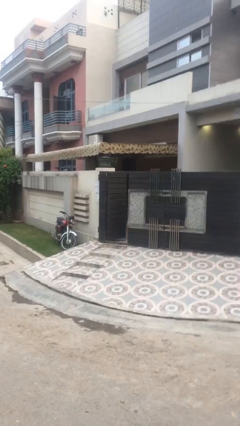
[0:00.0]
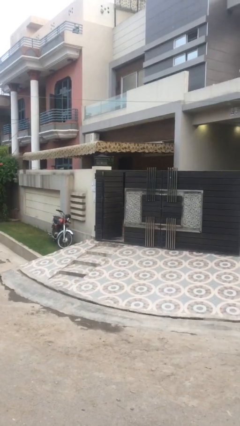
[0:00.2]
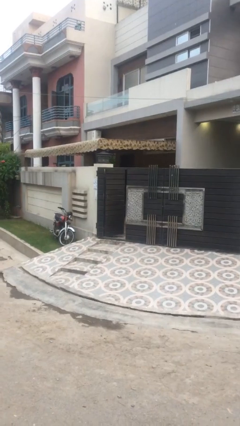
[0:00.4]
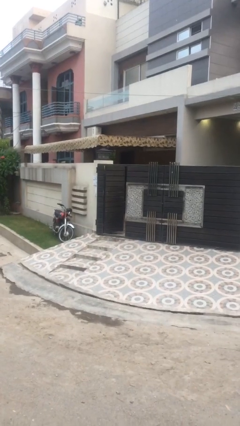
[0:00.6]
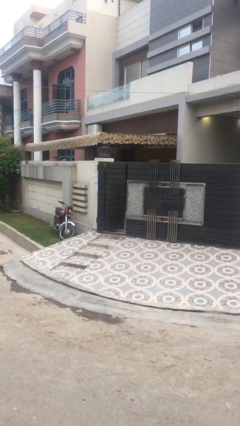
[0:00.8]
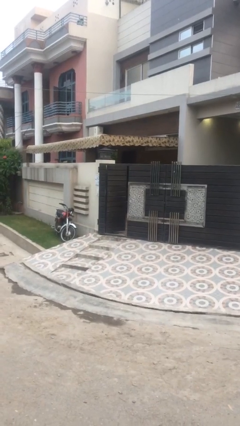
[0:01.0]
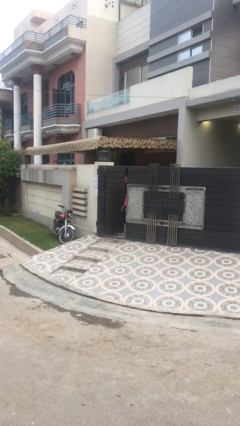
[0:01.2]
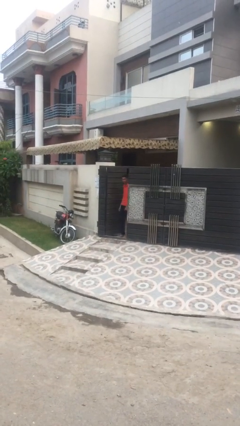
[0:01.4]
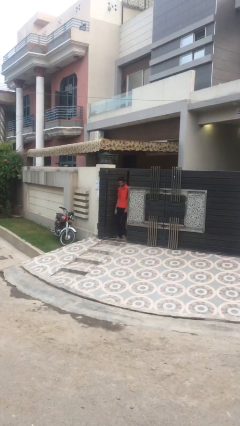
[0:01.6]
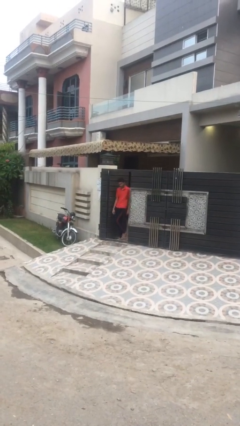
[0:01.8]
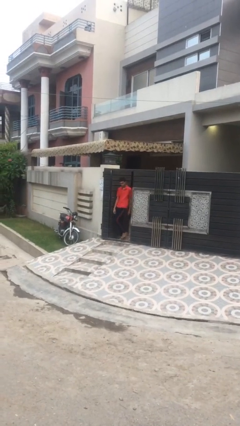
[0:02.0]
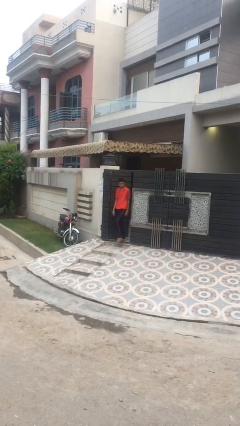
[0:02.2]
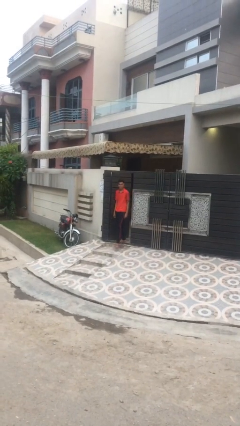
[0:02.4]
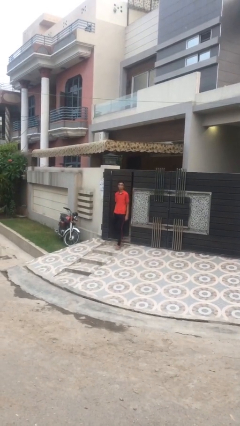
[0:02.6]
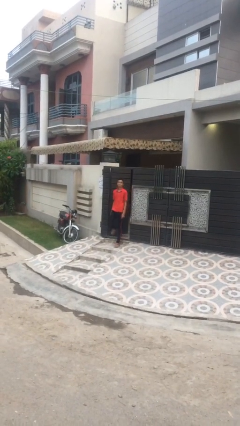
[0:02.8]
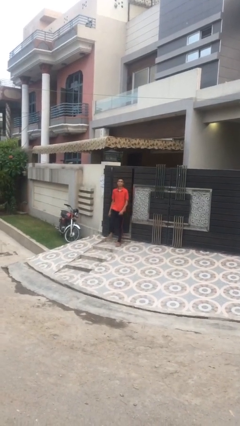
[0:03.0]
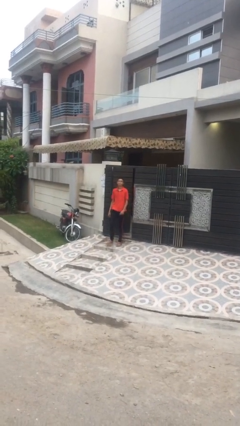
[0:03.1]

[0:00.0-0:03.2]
person enters scene through structure

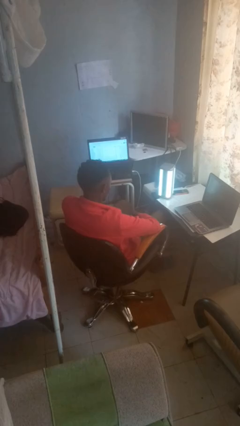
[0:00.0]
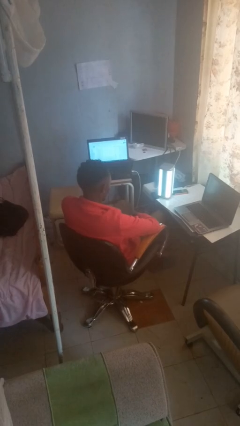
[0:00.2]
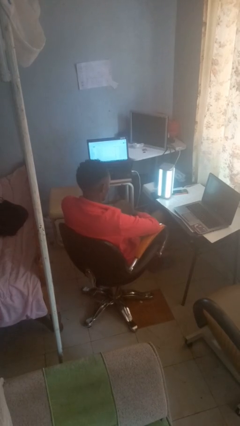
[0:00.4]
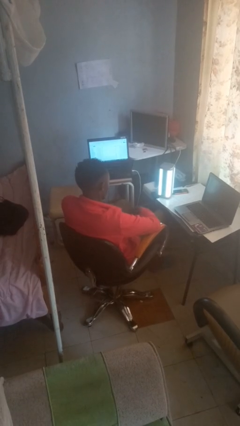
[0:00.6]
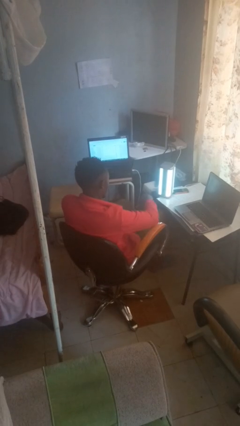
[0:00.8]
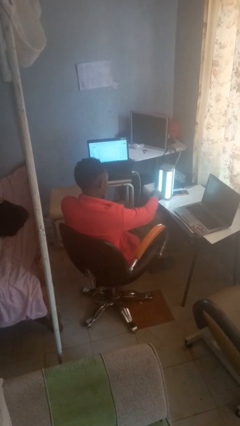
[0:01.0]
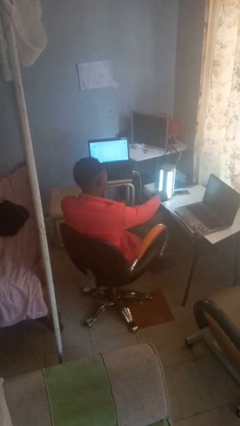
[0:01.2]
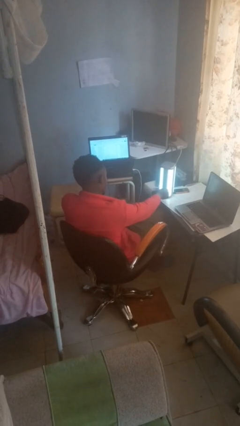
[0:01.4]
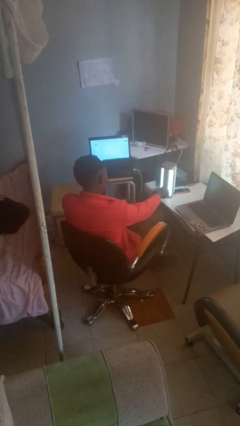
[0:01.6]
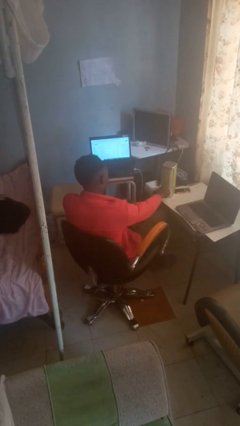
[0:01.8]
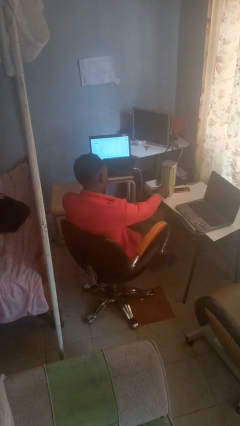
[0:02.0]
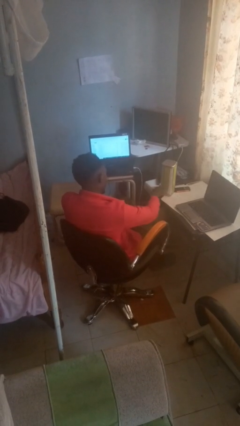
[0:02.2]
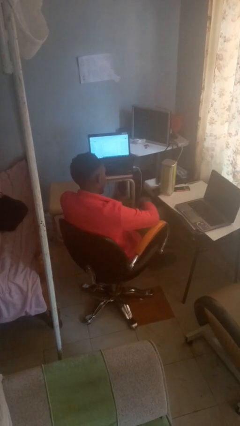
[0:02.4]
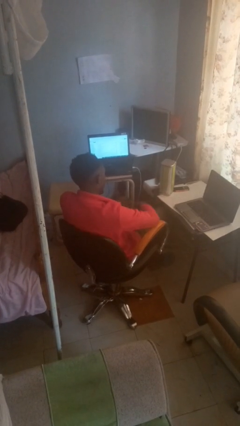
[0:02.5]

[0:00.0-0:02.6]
person turns off lamp

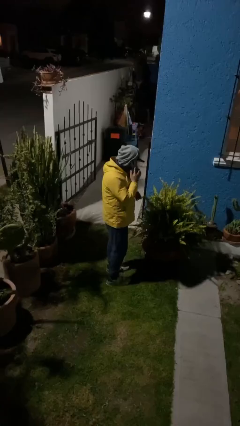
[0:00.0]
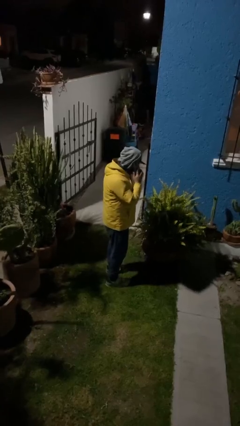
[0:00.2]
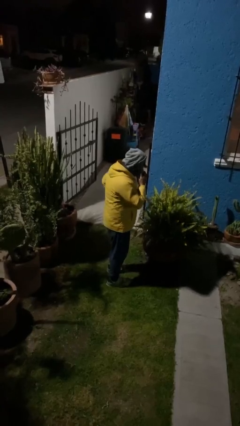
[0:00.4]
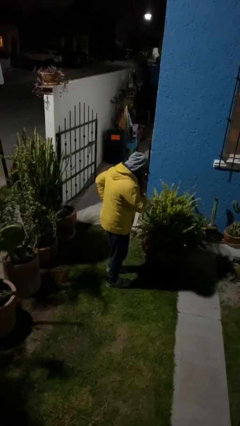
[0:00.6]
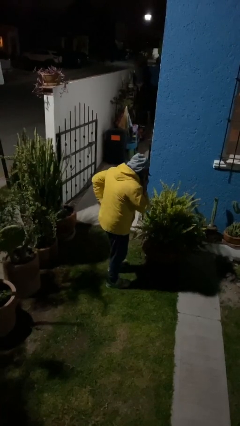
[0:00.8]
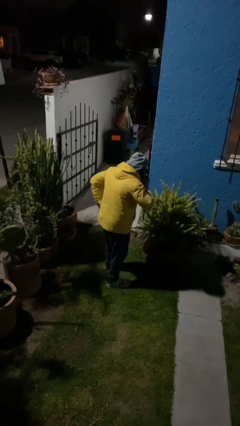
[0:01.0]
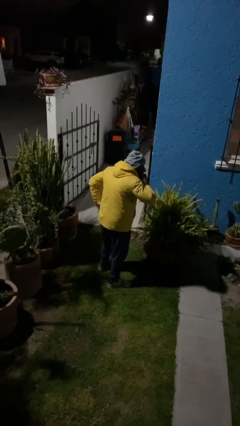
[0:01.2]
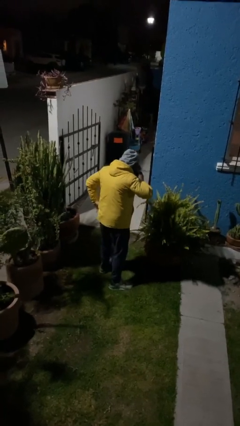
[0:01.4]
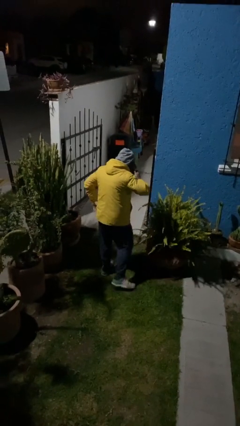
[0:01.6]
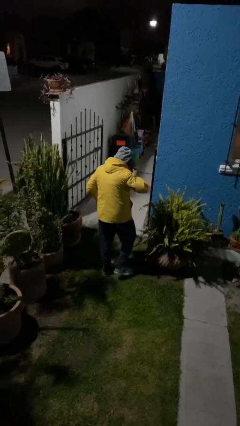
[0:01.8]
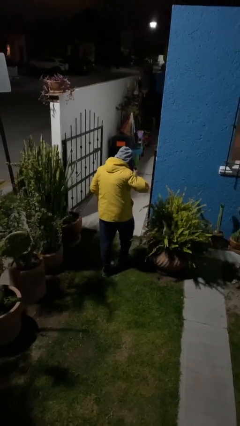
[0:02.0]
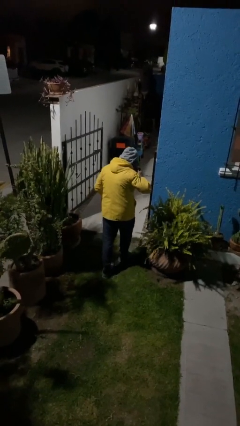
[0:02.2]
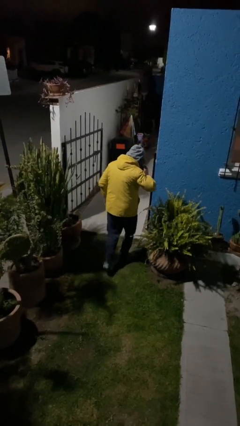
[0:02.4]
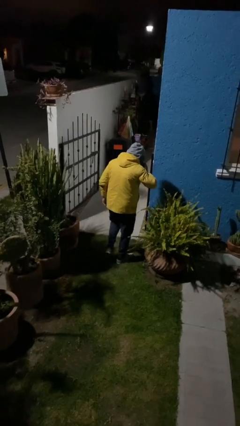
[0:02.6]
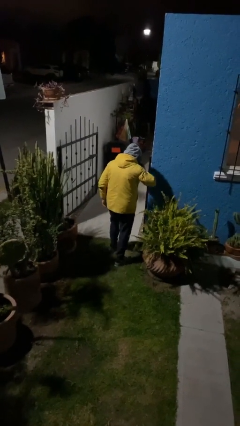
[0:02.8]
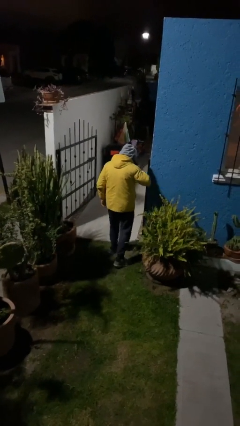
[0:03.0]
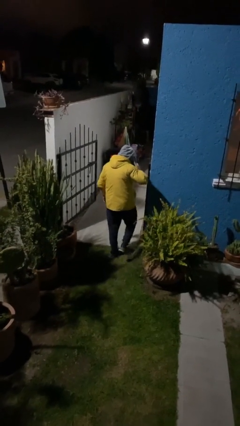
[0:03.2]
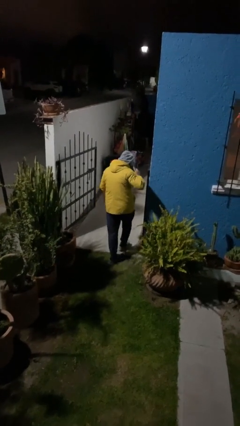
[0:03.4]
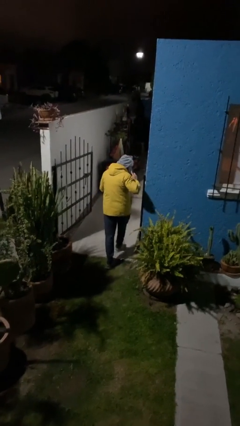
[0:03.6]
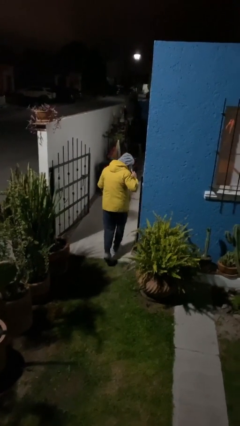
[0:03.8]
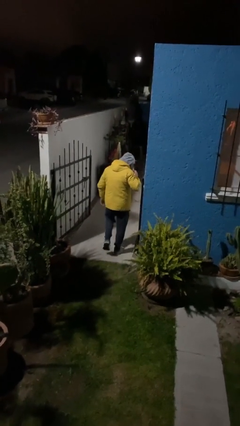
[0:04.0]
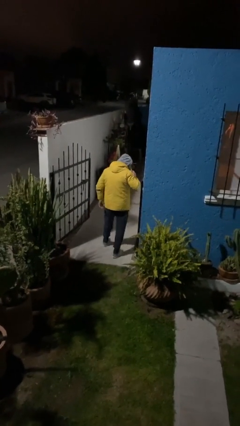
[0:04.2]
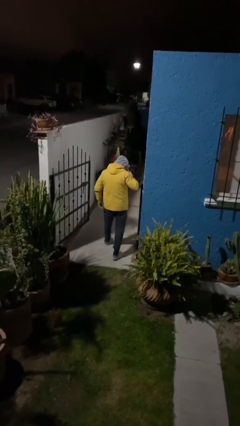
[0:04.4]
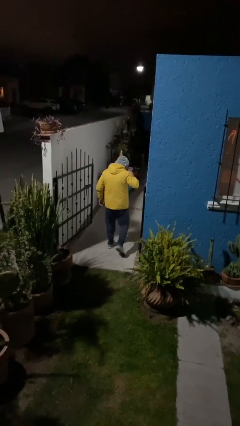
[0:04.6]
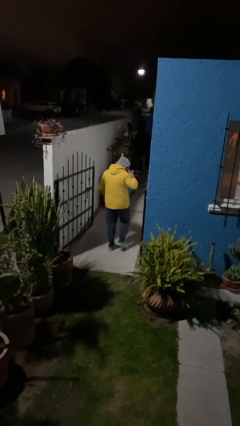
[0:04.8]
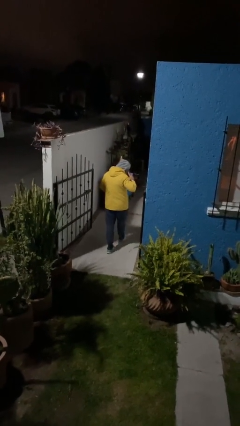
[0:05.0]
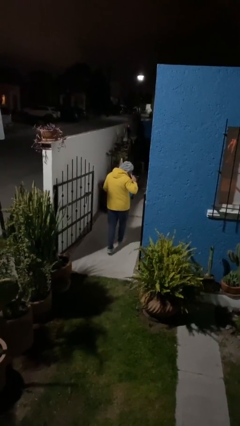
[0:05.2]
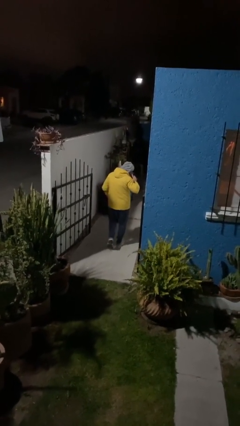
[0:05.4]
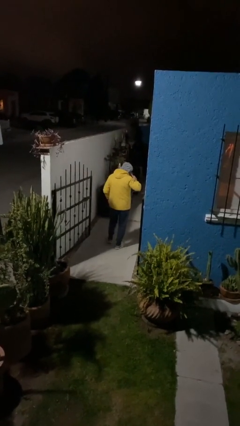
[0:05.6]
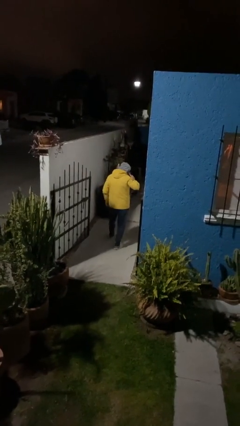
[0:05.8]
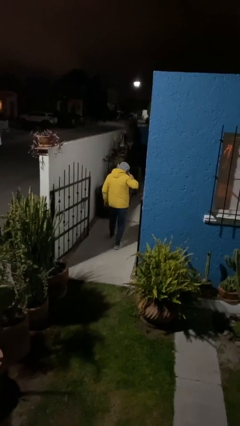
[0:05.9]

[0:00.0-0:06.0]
person exits scene through structure

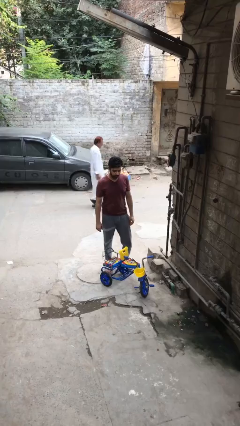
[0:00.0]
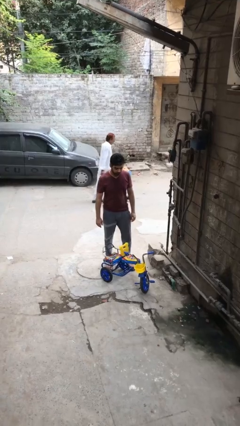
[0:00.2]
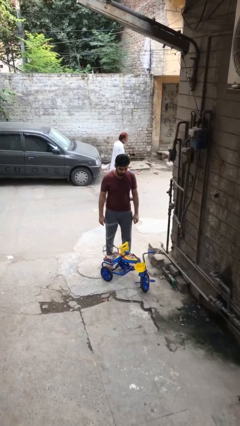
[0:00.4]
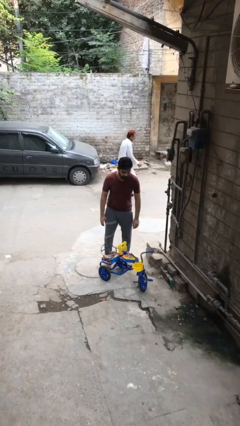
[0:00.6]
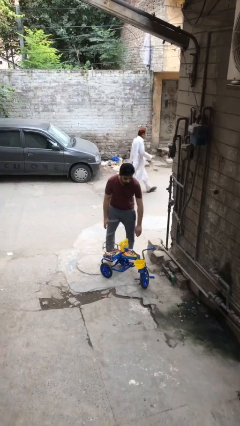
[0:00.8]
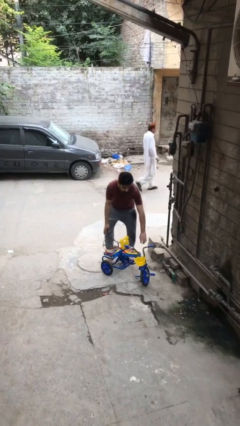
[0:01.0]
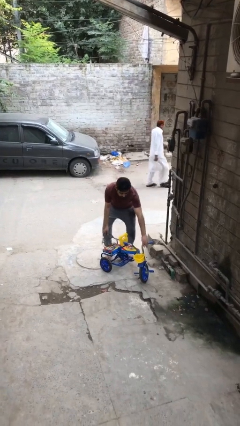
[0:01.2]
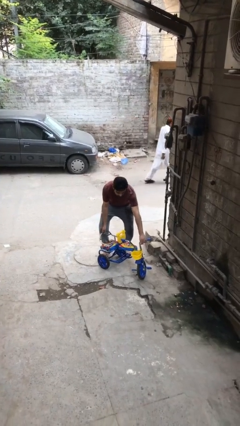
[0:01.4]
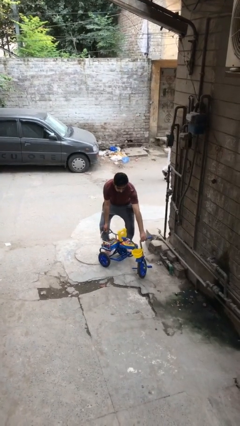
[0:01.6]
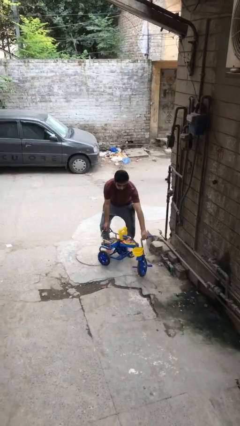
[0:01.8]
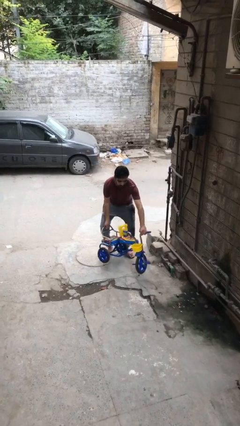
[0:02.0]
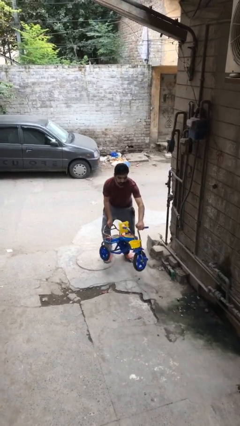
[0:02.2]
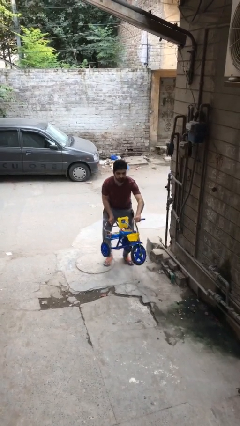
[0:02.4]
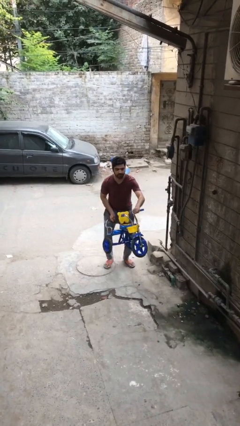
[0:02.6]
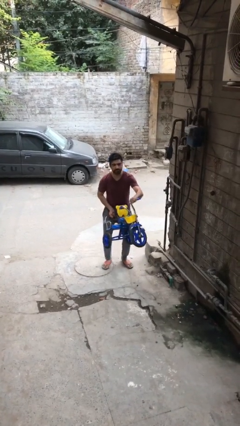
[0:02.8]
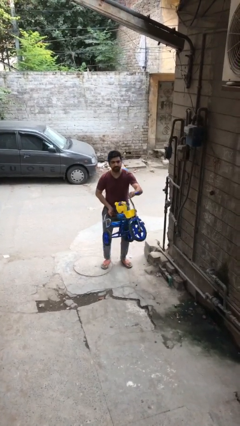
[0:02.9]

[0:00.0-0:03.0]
person picks up object from floor

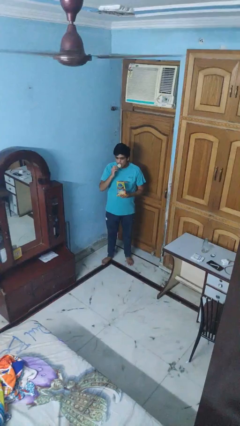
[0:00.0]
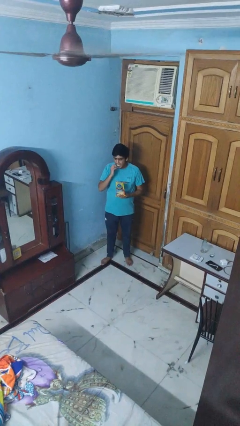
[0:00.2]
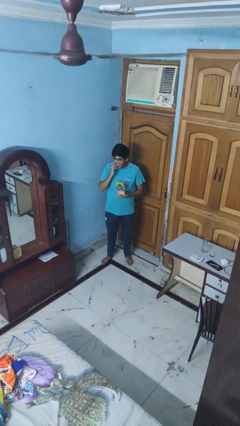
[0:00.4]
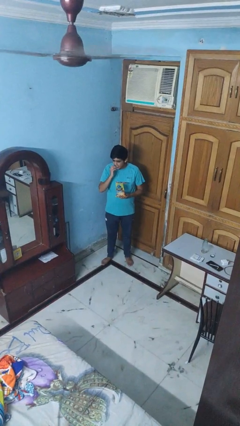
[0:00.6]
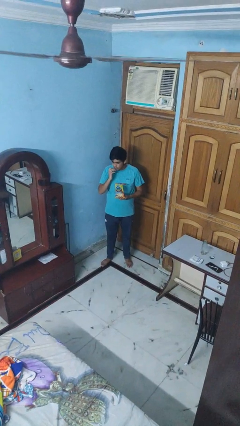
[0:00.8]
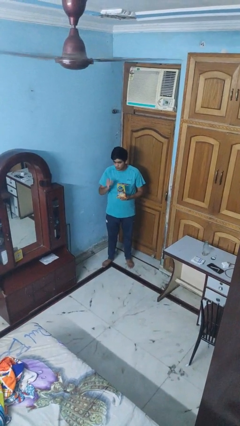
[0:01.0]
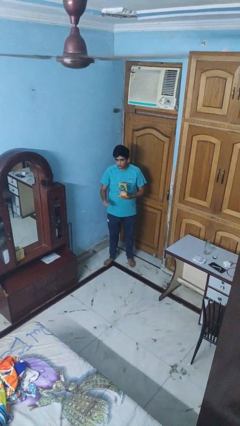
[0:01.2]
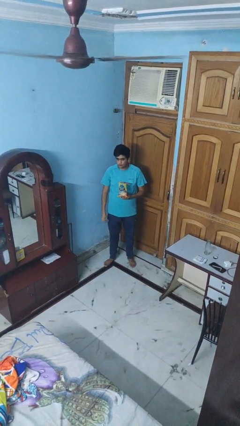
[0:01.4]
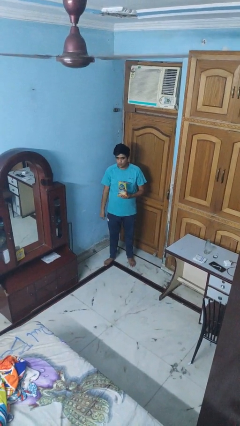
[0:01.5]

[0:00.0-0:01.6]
person eats snack from bag

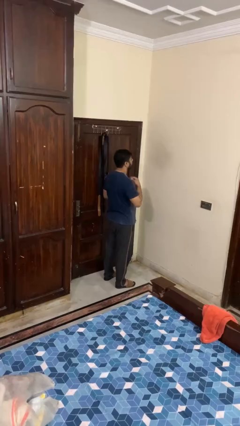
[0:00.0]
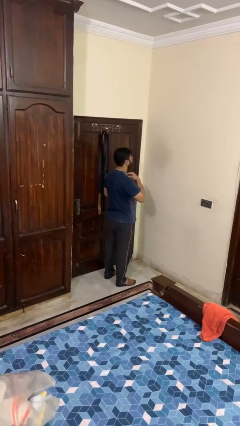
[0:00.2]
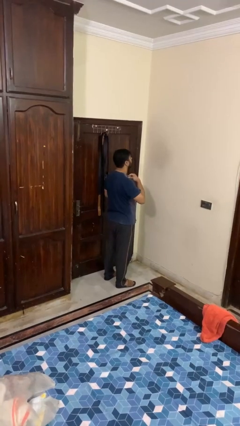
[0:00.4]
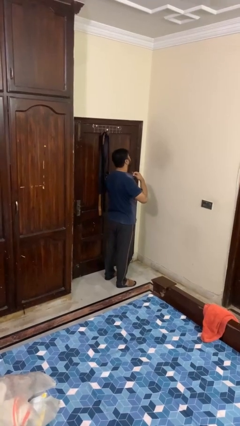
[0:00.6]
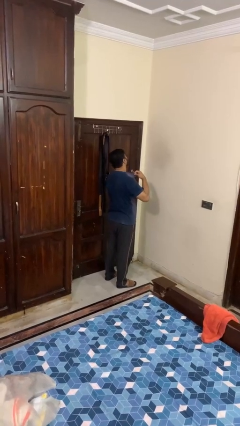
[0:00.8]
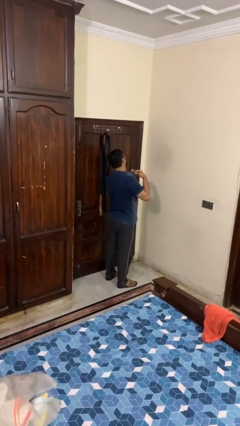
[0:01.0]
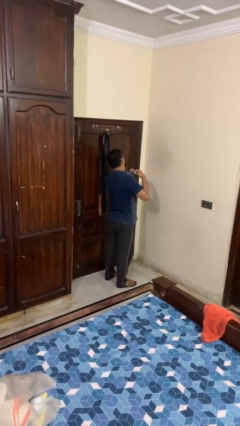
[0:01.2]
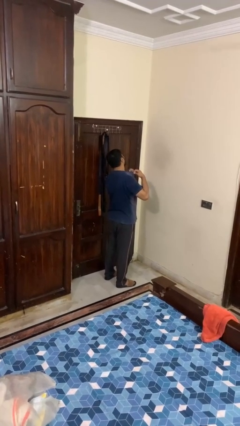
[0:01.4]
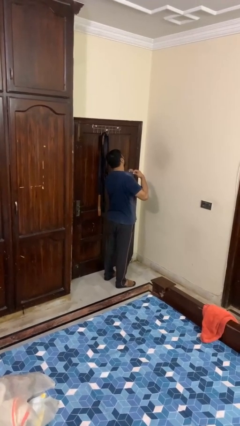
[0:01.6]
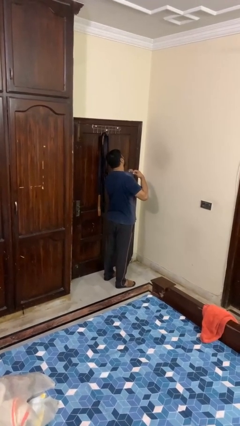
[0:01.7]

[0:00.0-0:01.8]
person applies deodorant
